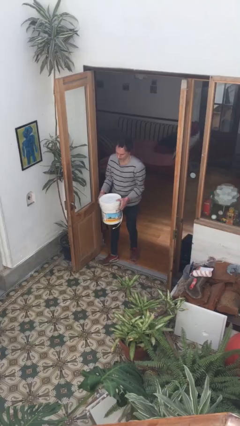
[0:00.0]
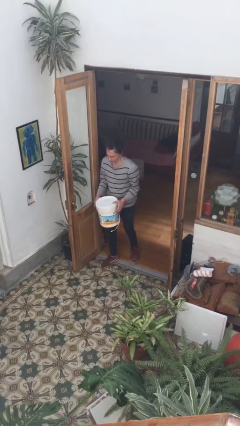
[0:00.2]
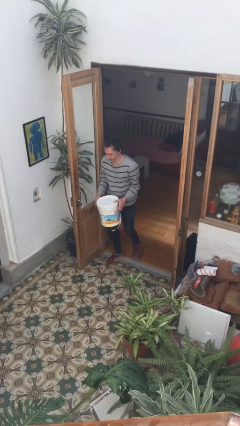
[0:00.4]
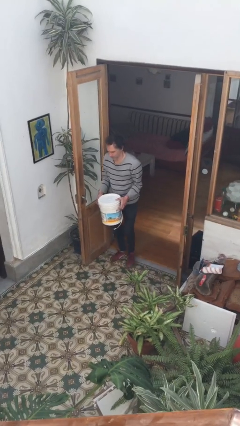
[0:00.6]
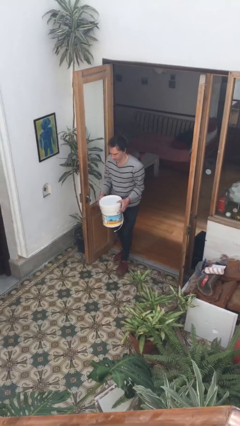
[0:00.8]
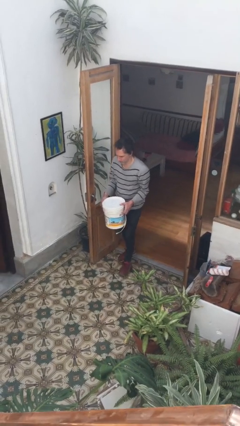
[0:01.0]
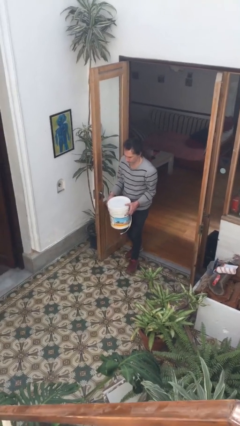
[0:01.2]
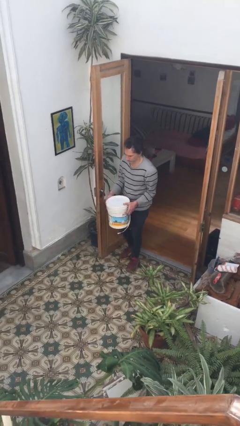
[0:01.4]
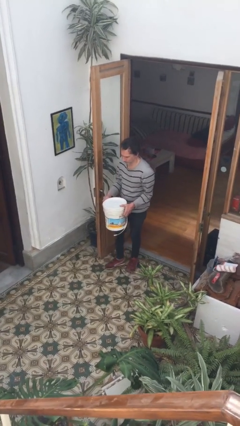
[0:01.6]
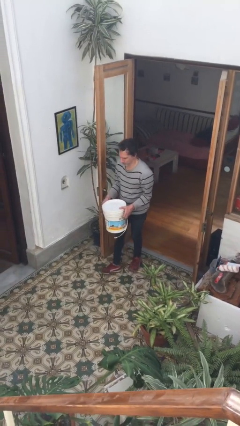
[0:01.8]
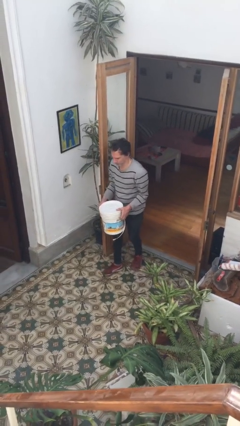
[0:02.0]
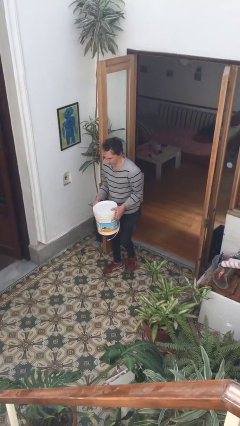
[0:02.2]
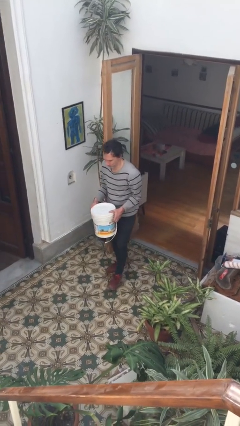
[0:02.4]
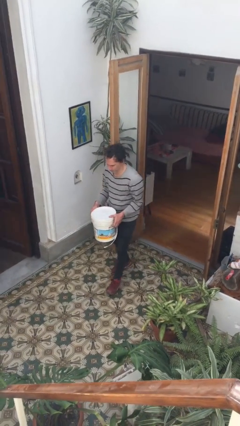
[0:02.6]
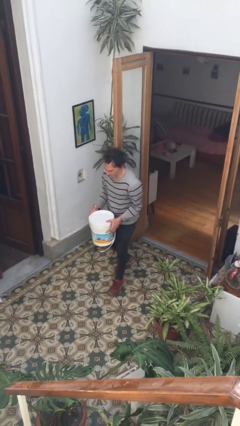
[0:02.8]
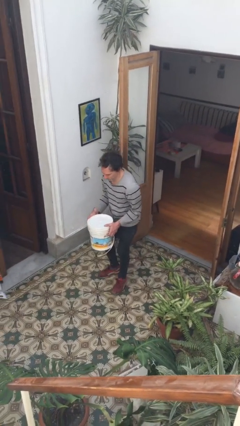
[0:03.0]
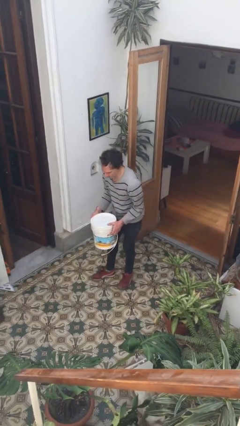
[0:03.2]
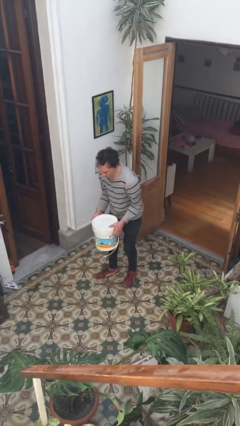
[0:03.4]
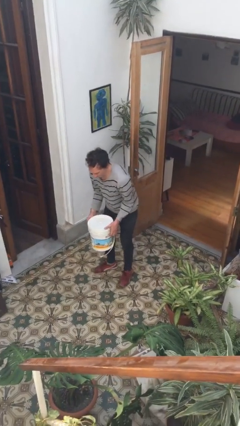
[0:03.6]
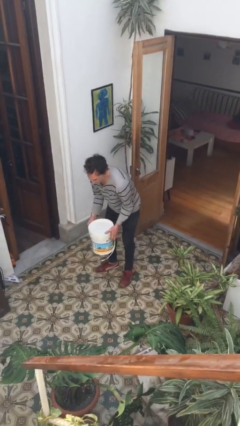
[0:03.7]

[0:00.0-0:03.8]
person carries heavy object

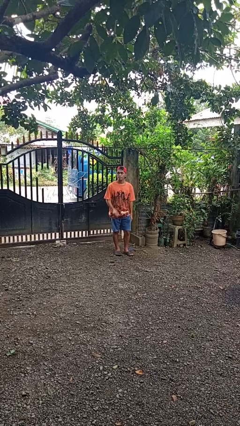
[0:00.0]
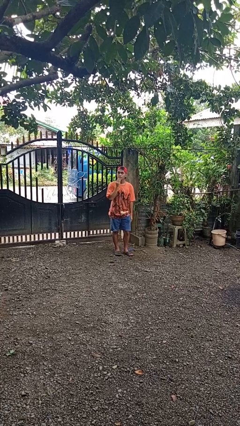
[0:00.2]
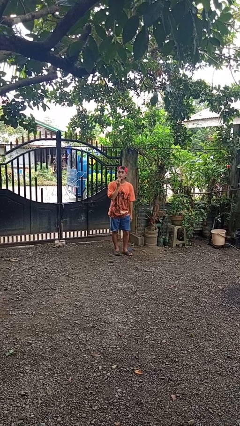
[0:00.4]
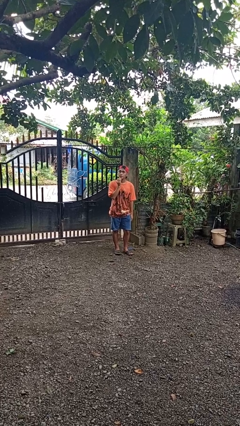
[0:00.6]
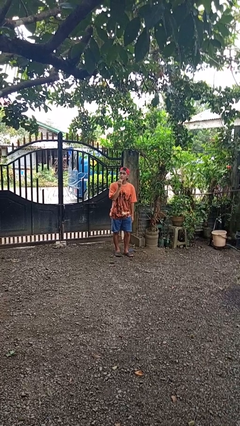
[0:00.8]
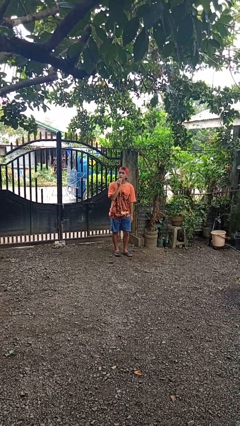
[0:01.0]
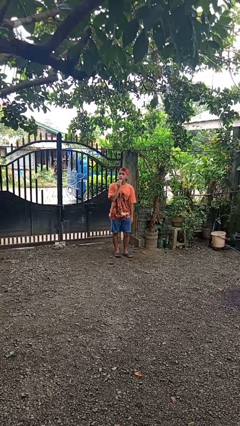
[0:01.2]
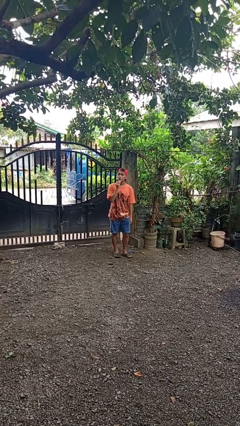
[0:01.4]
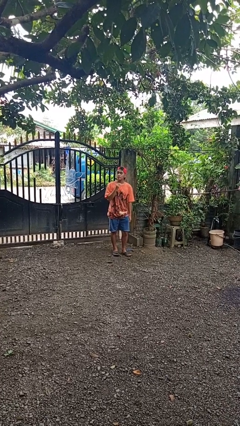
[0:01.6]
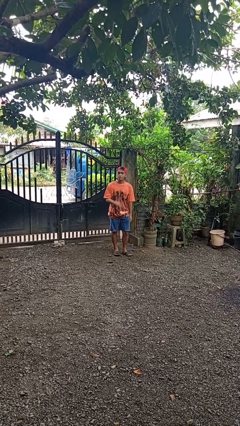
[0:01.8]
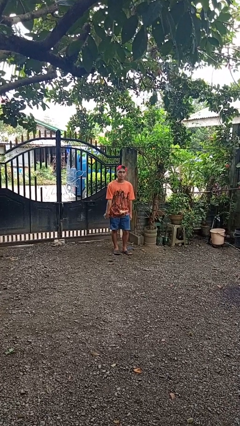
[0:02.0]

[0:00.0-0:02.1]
person strokes chin

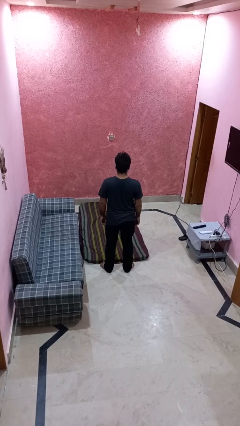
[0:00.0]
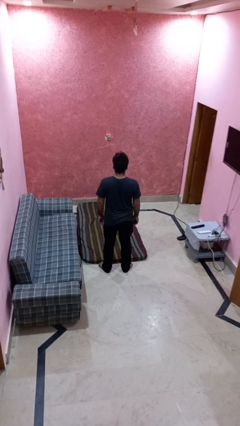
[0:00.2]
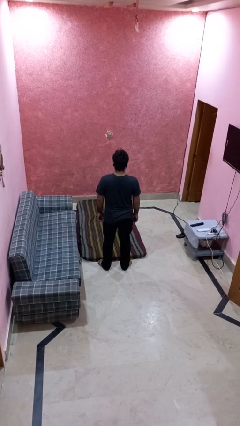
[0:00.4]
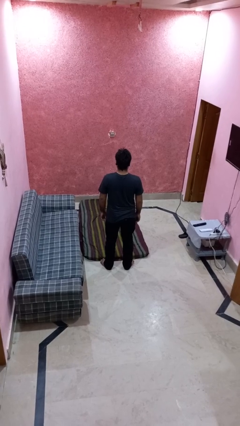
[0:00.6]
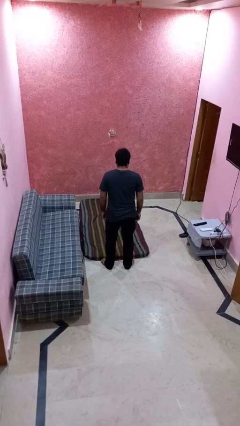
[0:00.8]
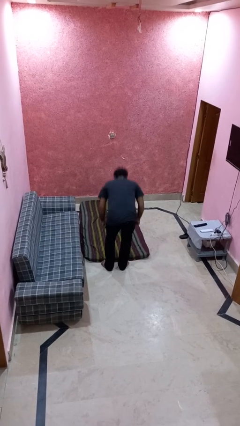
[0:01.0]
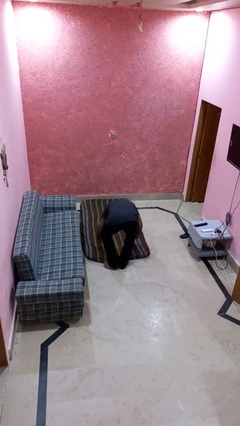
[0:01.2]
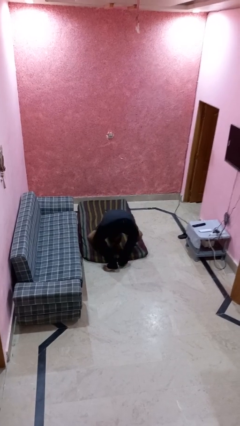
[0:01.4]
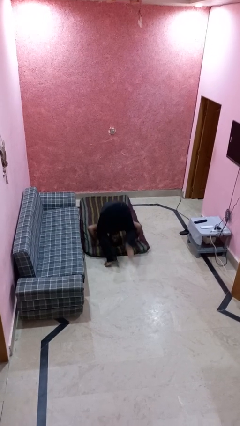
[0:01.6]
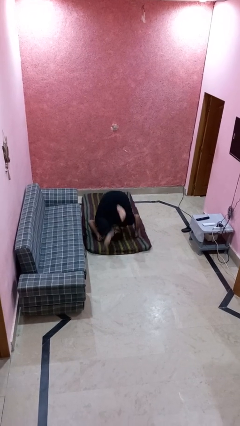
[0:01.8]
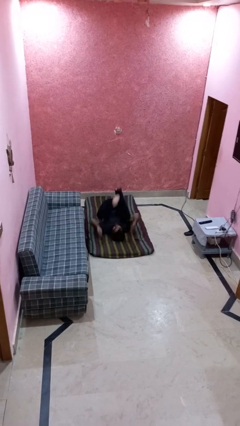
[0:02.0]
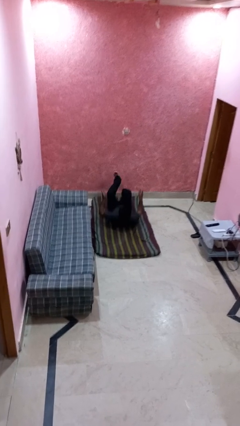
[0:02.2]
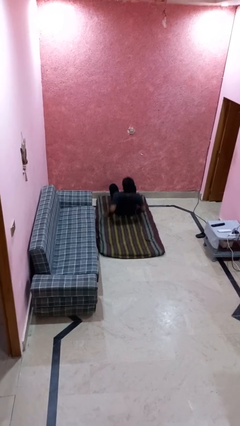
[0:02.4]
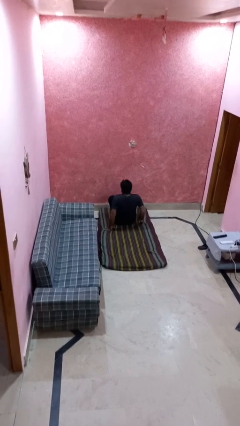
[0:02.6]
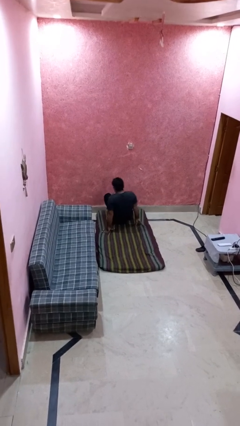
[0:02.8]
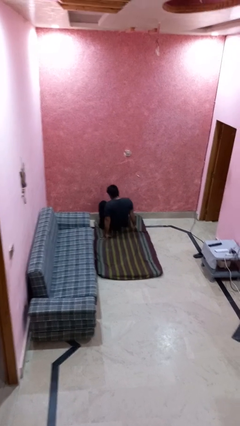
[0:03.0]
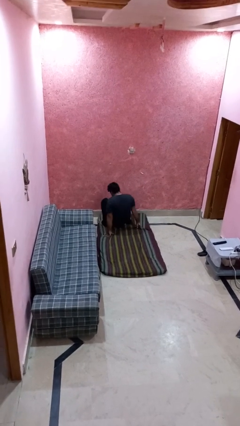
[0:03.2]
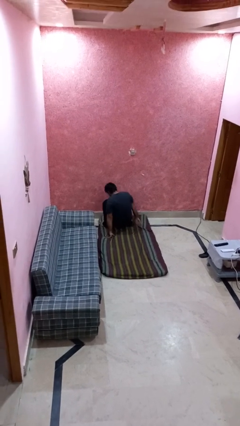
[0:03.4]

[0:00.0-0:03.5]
person somersaults

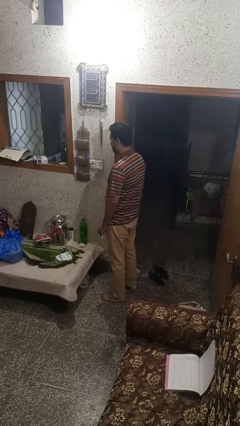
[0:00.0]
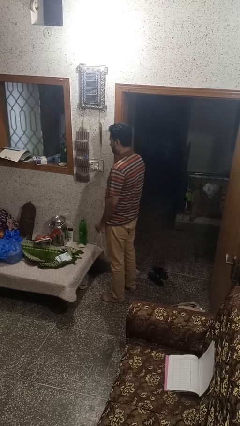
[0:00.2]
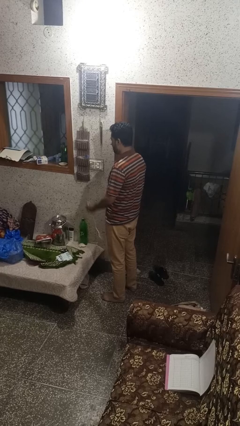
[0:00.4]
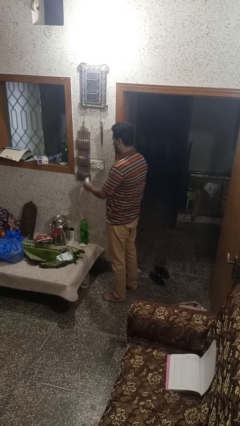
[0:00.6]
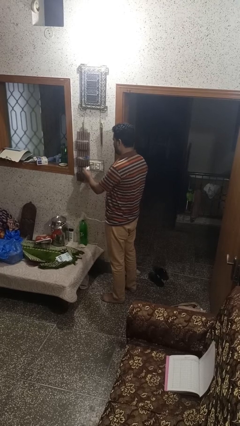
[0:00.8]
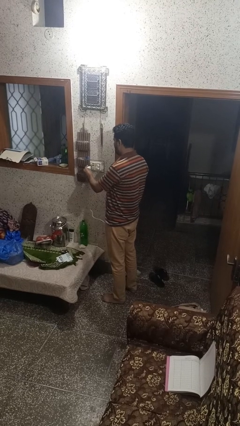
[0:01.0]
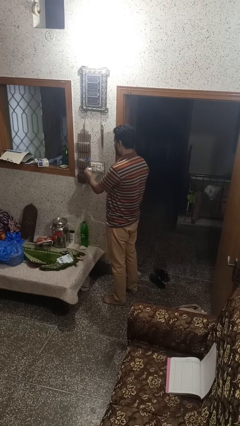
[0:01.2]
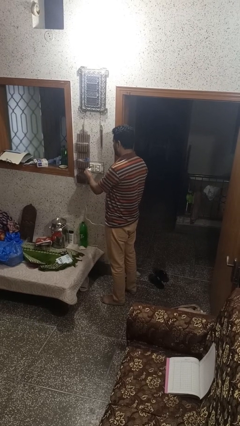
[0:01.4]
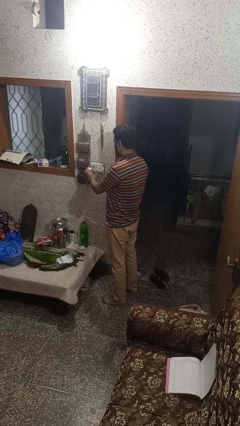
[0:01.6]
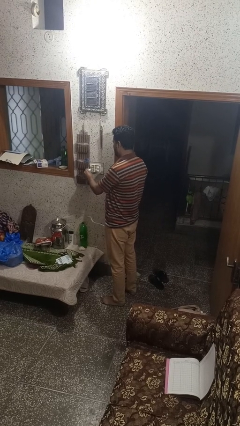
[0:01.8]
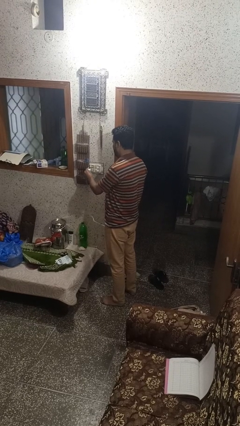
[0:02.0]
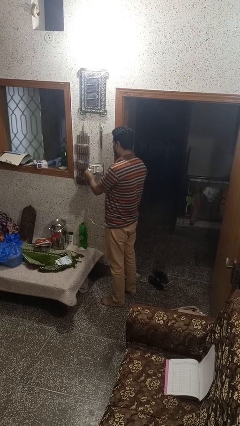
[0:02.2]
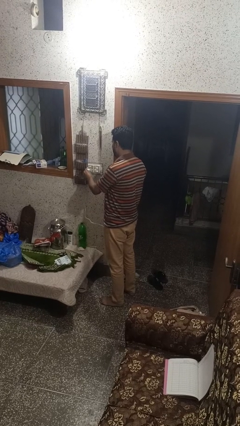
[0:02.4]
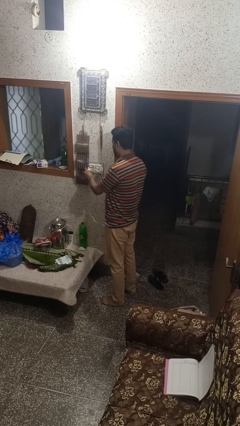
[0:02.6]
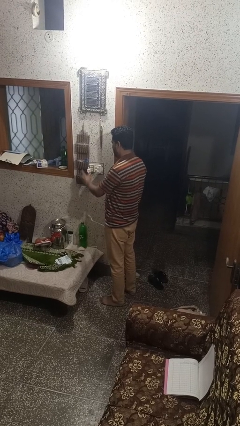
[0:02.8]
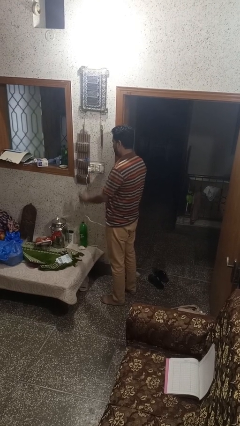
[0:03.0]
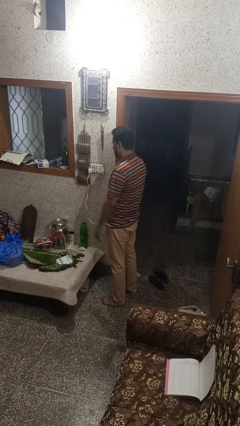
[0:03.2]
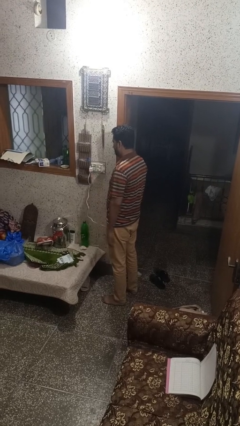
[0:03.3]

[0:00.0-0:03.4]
person plugs into electrical socket

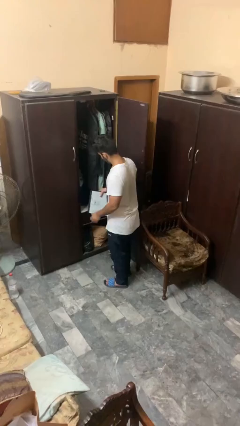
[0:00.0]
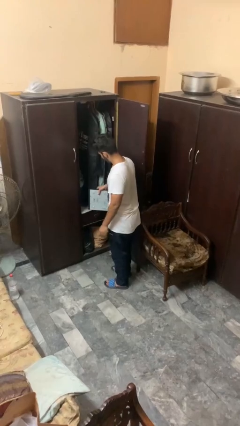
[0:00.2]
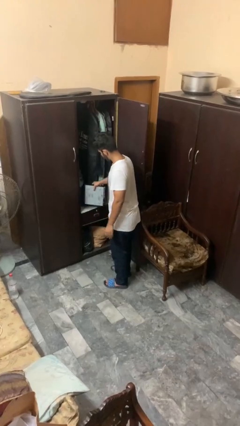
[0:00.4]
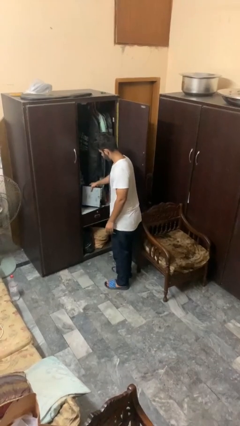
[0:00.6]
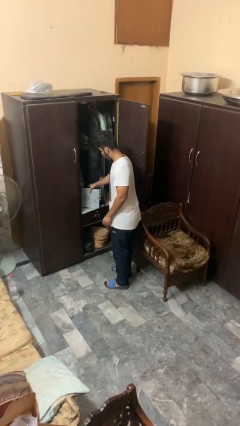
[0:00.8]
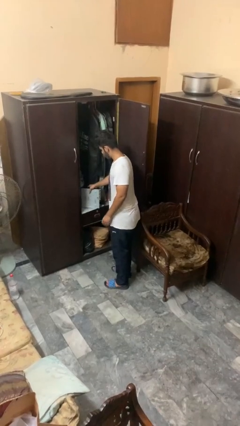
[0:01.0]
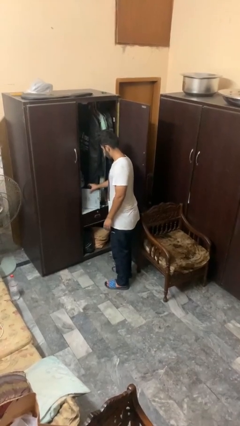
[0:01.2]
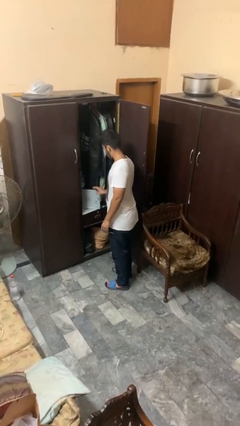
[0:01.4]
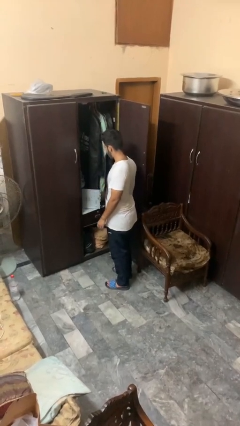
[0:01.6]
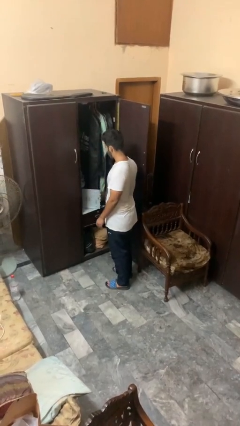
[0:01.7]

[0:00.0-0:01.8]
person puts down object into cabinet

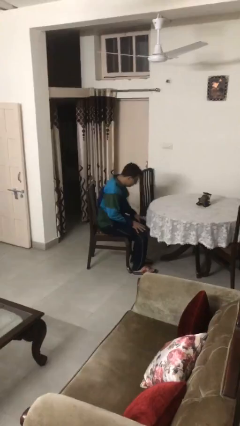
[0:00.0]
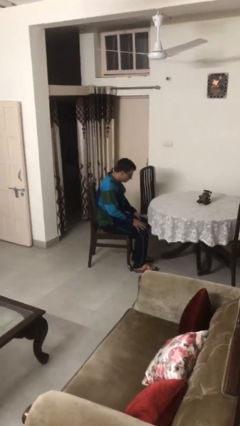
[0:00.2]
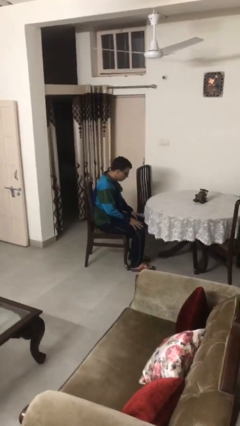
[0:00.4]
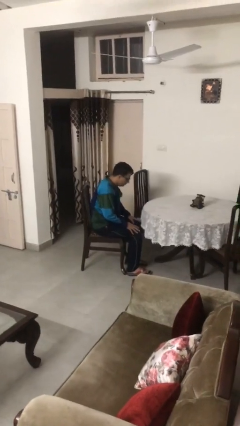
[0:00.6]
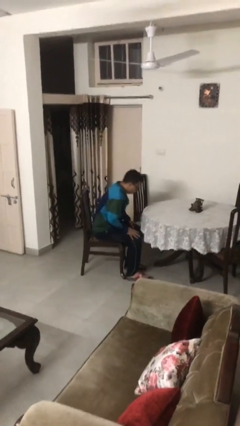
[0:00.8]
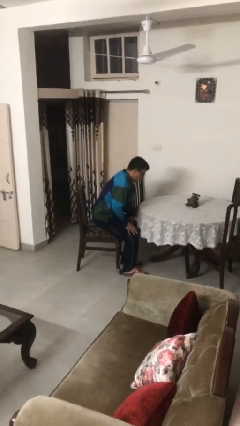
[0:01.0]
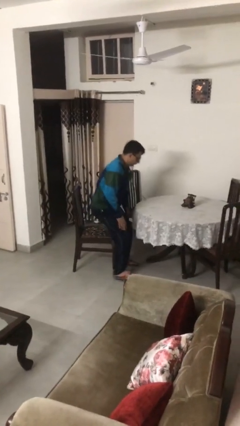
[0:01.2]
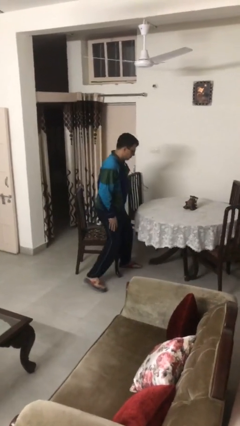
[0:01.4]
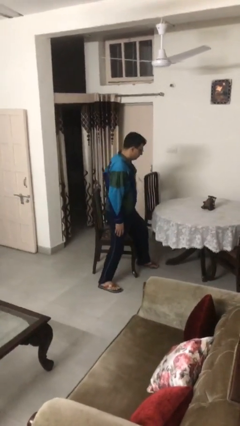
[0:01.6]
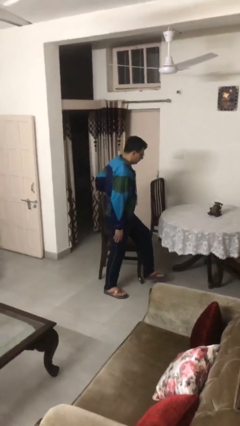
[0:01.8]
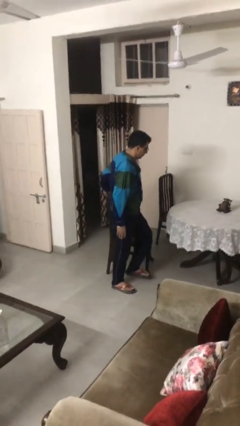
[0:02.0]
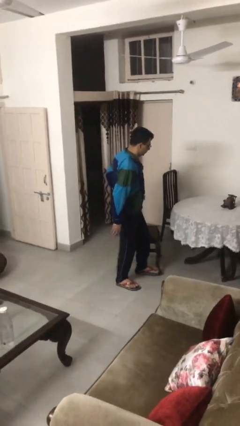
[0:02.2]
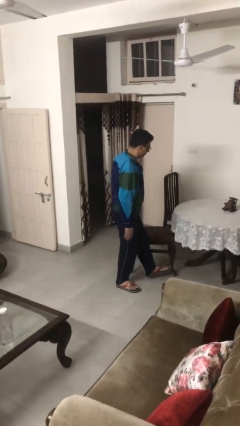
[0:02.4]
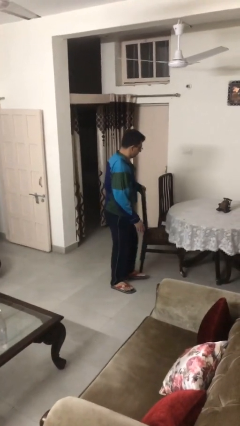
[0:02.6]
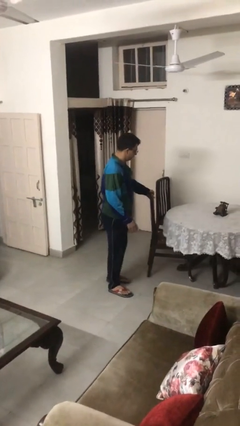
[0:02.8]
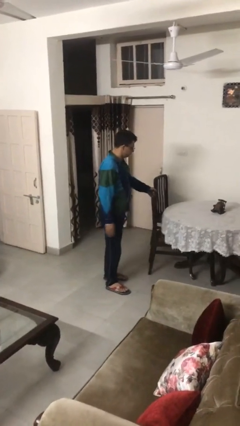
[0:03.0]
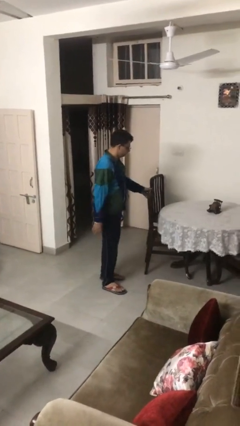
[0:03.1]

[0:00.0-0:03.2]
person stands up
